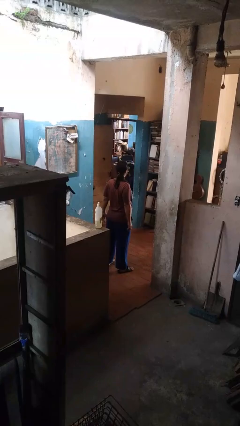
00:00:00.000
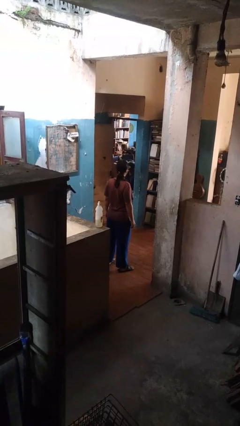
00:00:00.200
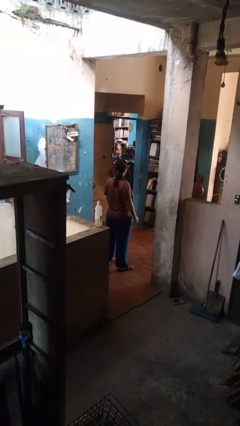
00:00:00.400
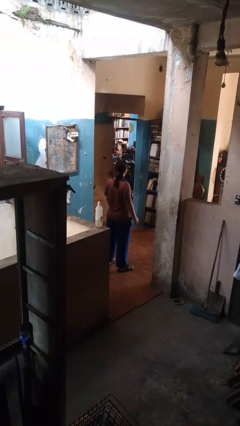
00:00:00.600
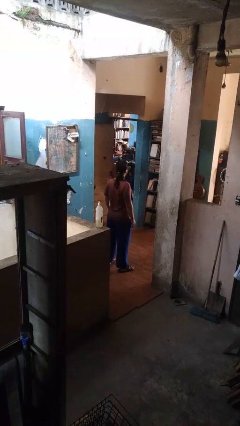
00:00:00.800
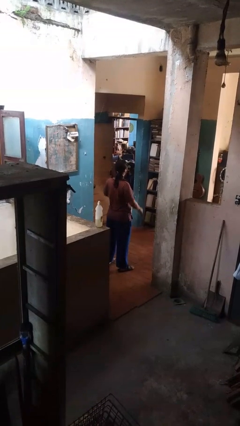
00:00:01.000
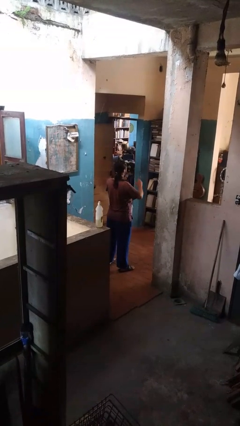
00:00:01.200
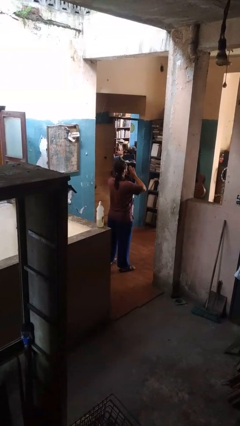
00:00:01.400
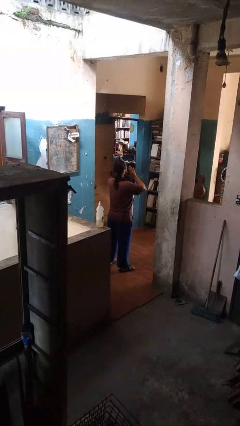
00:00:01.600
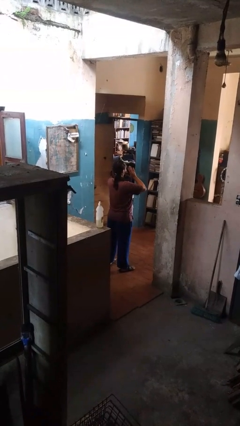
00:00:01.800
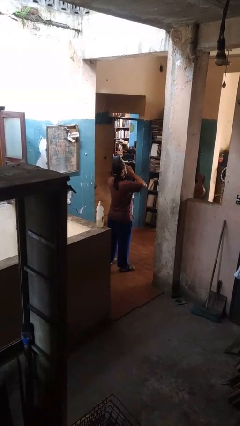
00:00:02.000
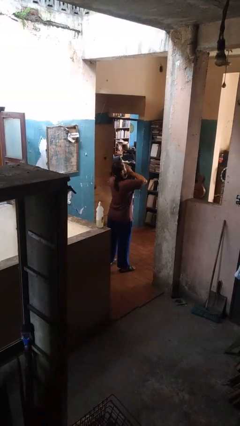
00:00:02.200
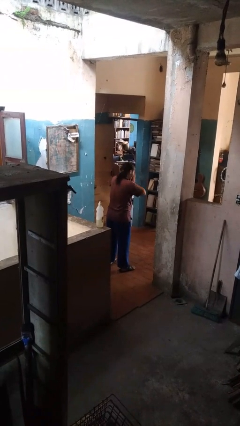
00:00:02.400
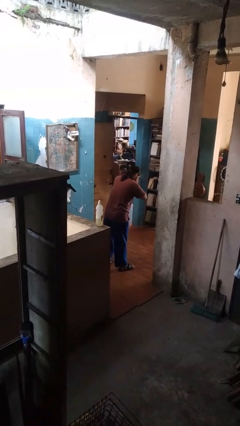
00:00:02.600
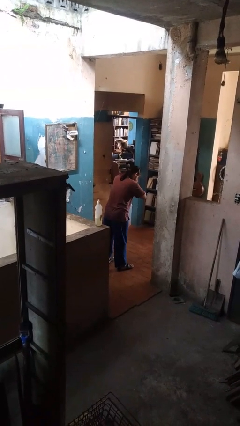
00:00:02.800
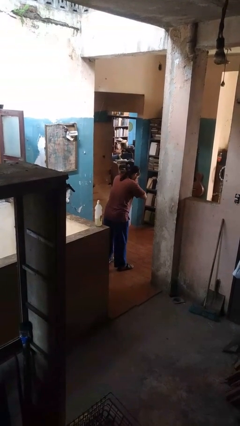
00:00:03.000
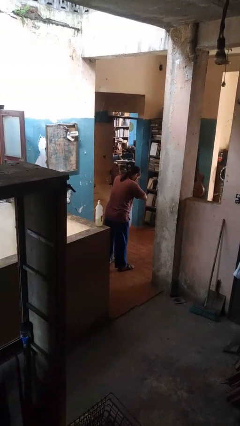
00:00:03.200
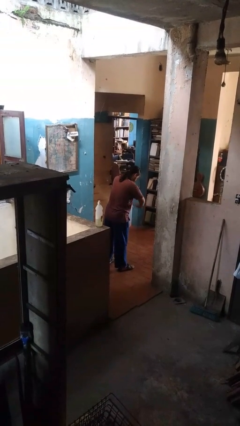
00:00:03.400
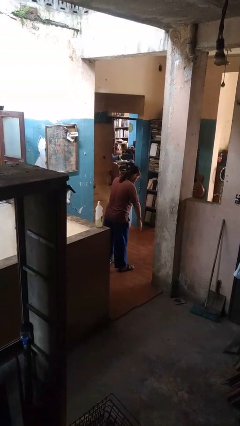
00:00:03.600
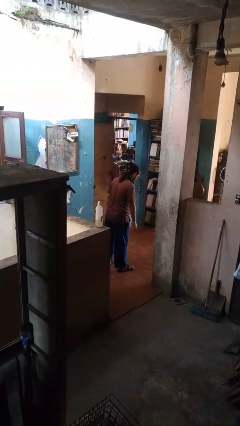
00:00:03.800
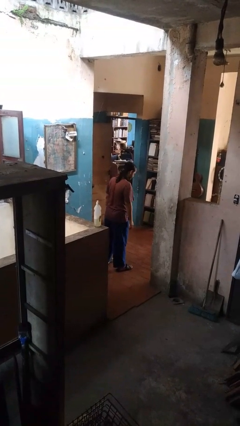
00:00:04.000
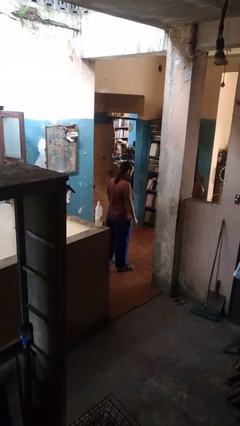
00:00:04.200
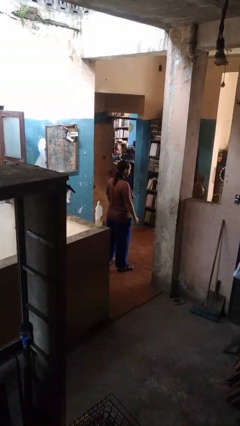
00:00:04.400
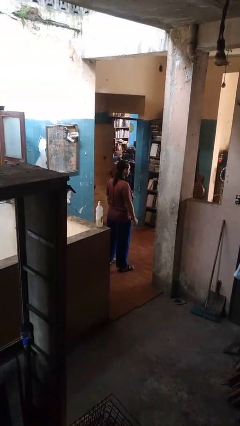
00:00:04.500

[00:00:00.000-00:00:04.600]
person sneezes into hand

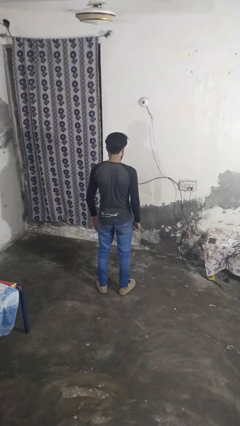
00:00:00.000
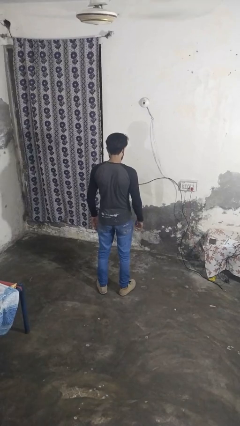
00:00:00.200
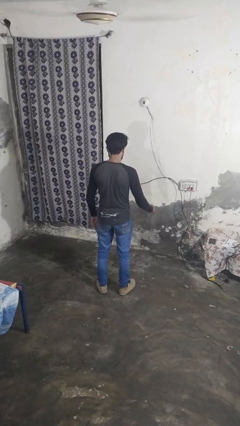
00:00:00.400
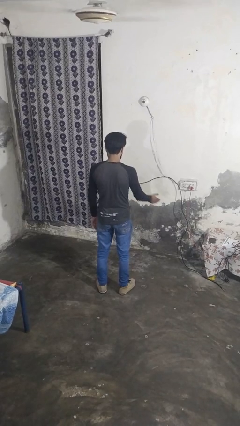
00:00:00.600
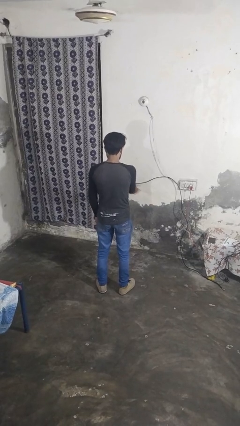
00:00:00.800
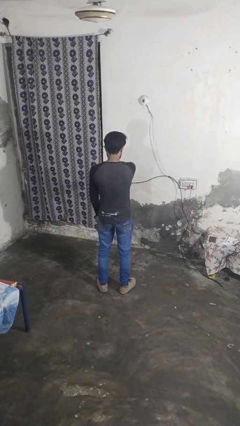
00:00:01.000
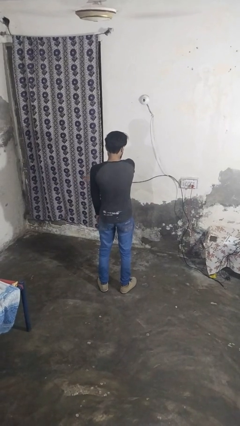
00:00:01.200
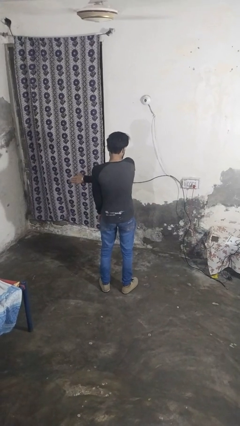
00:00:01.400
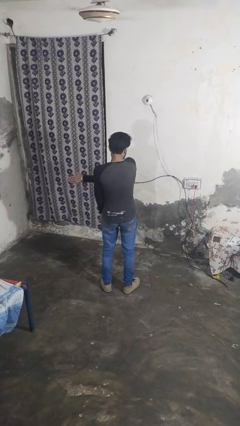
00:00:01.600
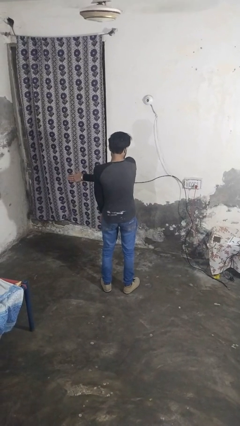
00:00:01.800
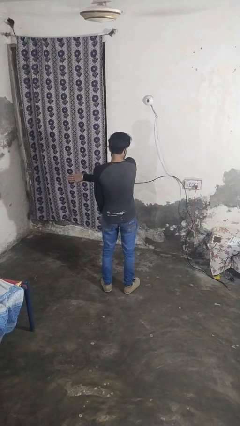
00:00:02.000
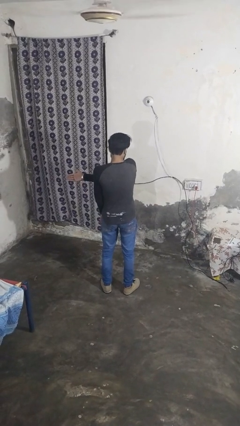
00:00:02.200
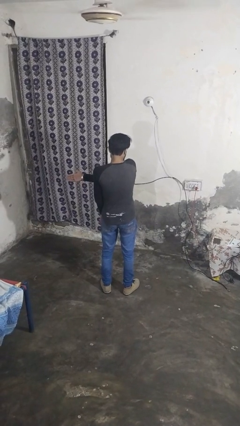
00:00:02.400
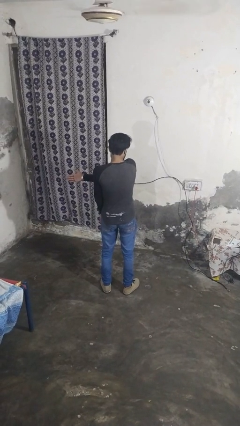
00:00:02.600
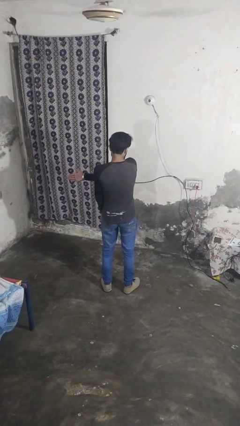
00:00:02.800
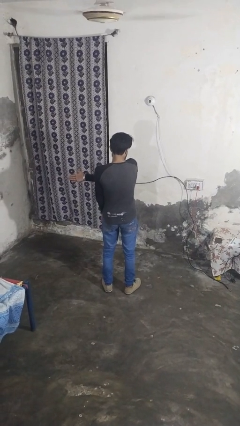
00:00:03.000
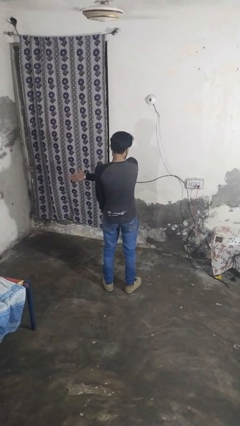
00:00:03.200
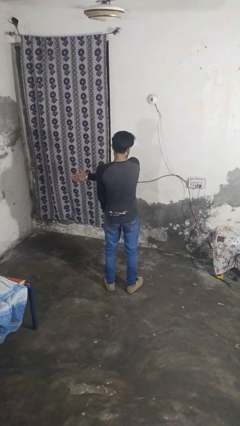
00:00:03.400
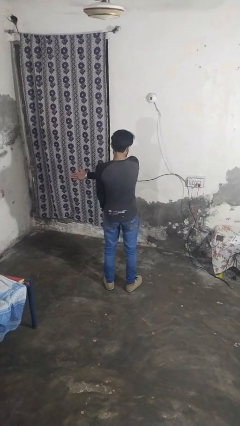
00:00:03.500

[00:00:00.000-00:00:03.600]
person gestures swipe left

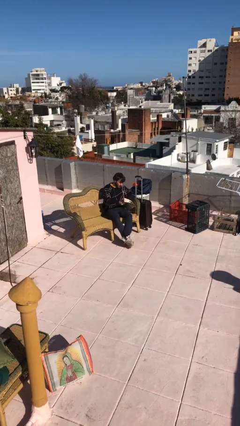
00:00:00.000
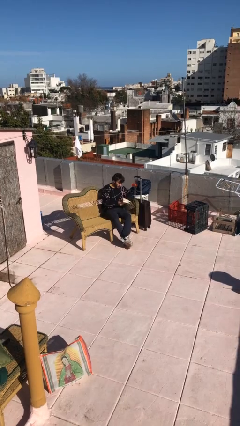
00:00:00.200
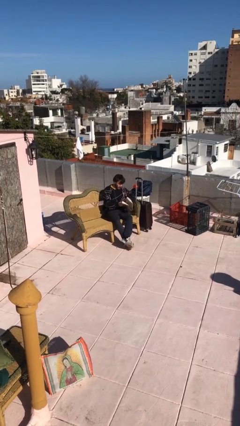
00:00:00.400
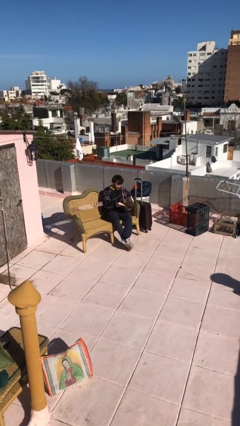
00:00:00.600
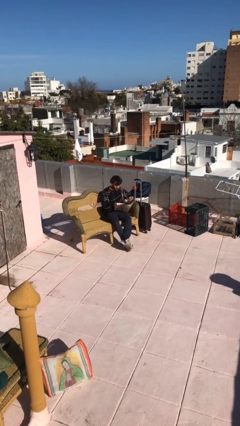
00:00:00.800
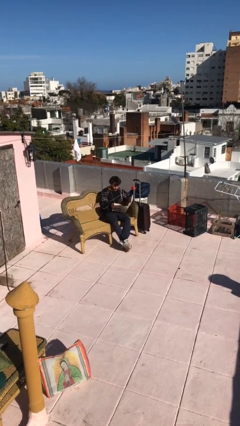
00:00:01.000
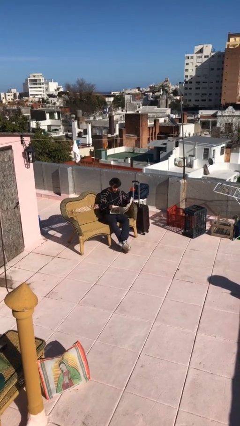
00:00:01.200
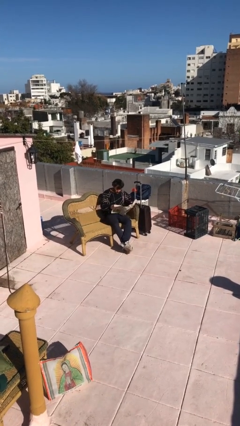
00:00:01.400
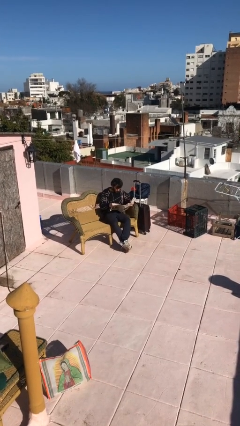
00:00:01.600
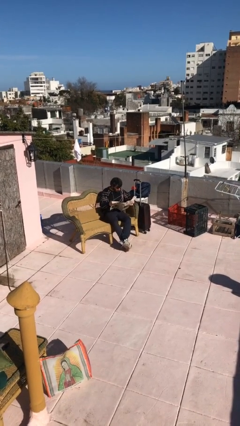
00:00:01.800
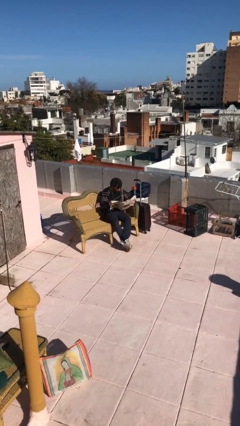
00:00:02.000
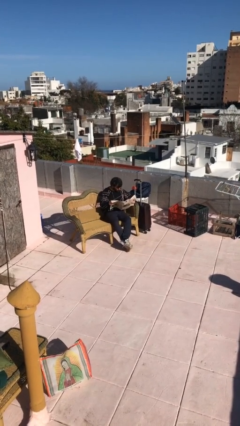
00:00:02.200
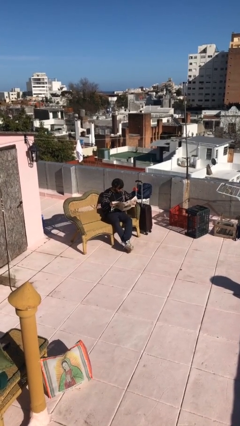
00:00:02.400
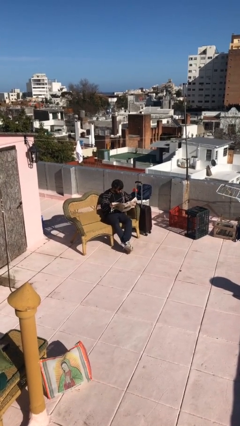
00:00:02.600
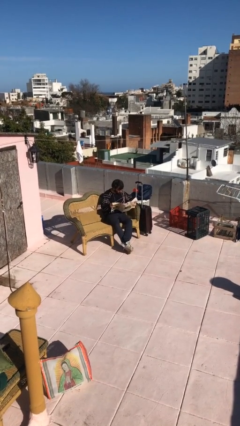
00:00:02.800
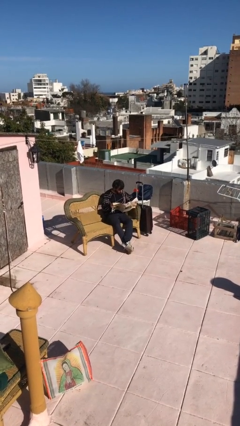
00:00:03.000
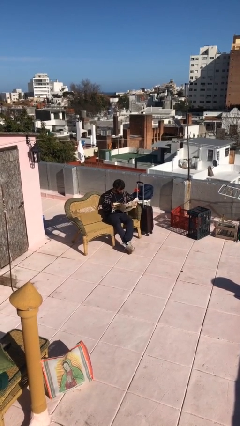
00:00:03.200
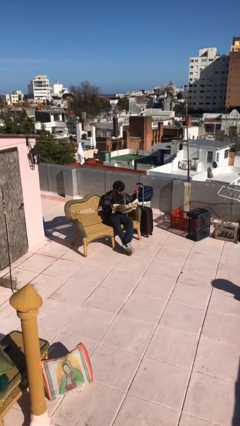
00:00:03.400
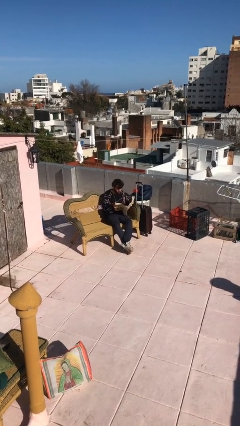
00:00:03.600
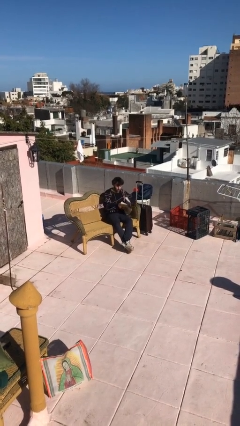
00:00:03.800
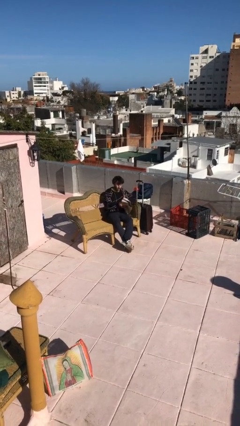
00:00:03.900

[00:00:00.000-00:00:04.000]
person reads newspaper

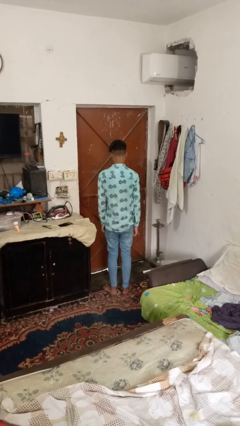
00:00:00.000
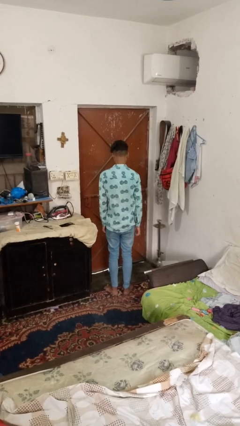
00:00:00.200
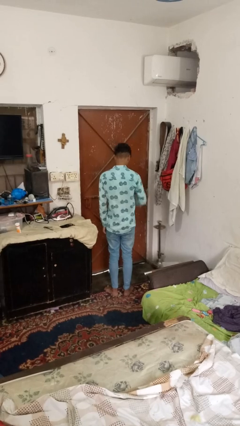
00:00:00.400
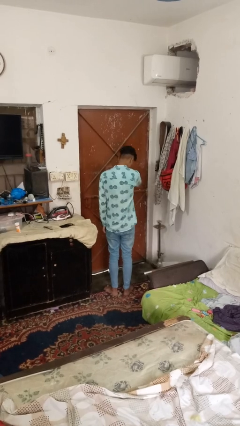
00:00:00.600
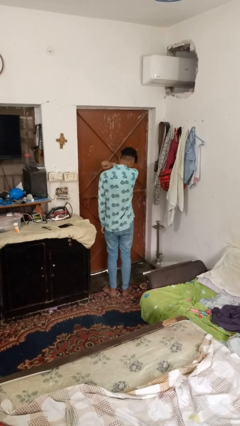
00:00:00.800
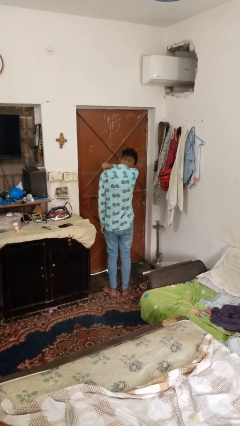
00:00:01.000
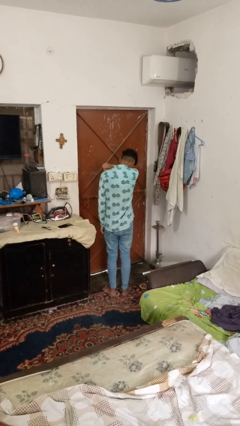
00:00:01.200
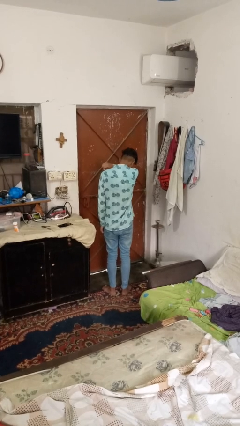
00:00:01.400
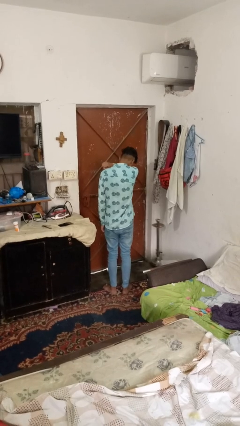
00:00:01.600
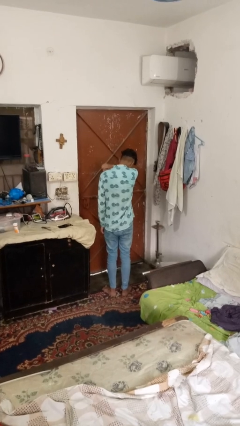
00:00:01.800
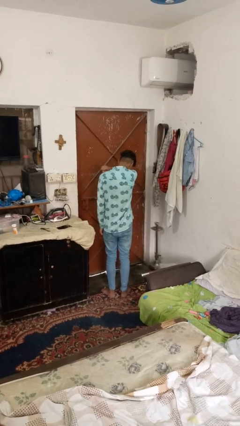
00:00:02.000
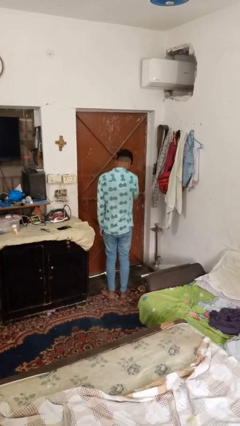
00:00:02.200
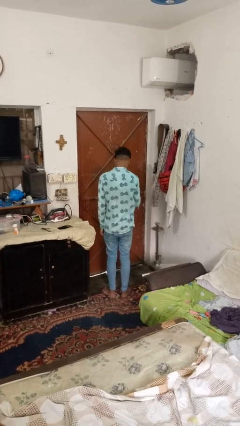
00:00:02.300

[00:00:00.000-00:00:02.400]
person sneezes into arm

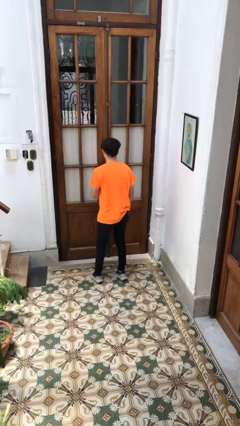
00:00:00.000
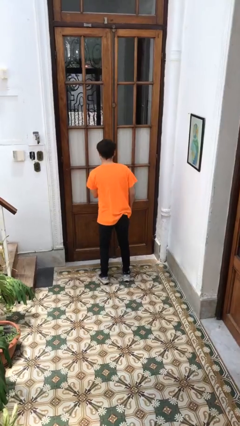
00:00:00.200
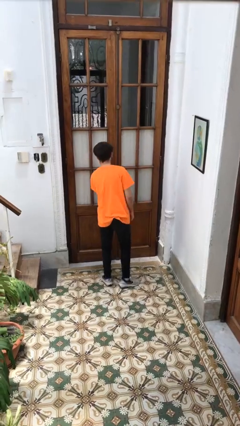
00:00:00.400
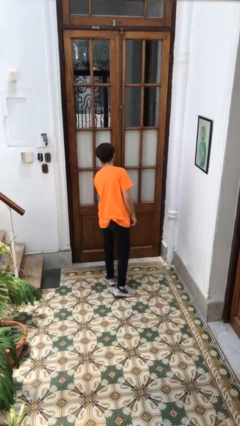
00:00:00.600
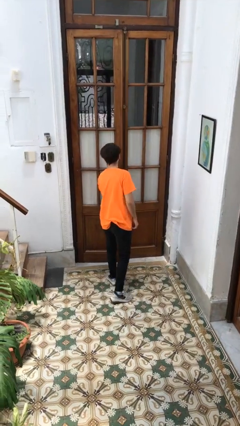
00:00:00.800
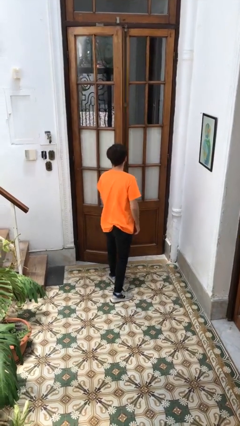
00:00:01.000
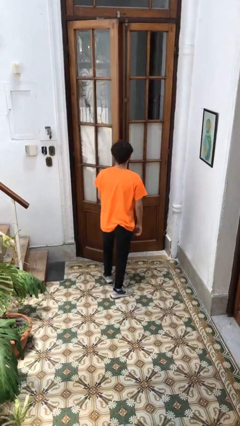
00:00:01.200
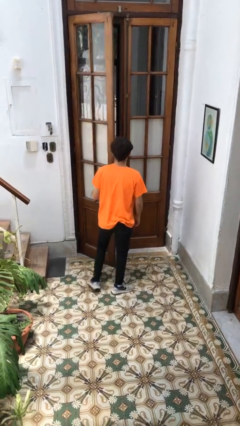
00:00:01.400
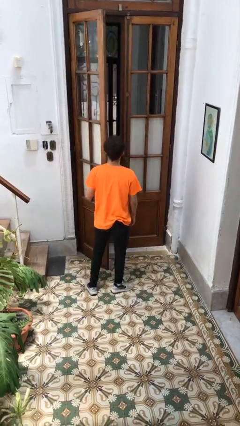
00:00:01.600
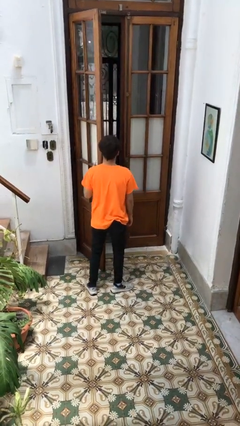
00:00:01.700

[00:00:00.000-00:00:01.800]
person opens facility door

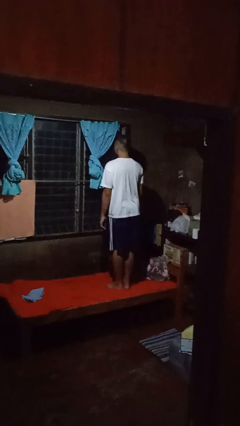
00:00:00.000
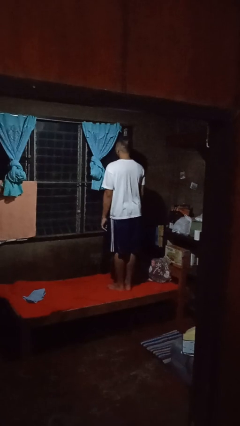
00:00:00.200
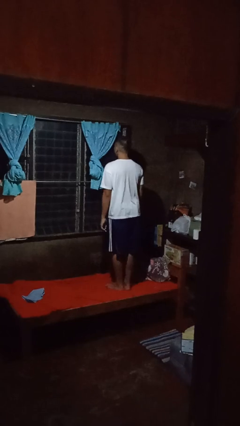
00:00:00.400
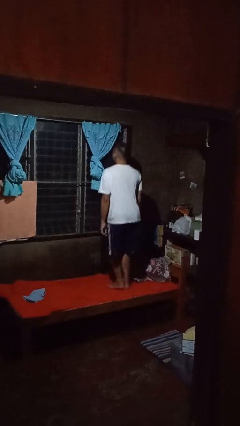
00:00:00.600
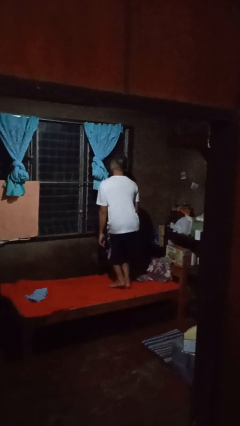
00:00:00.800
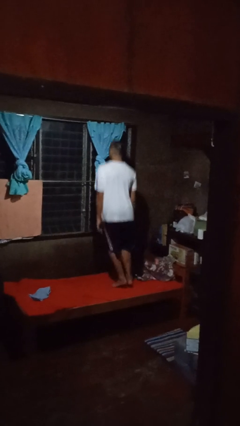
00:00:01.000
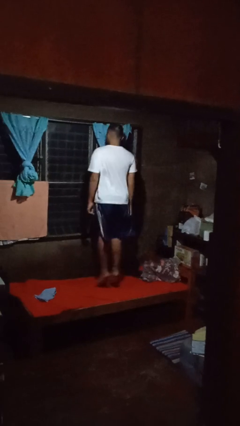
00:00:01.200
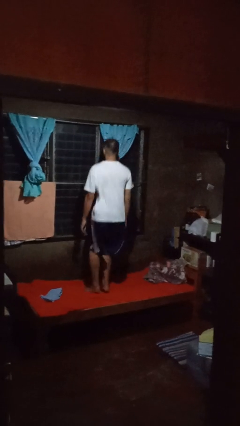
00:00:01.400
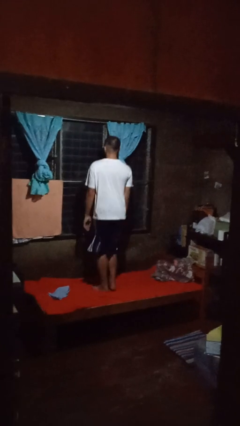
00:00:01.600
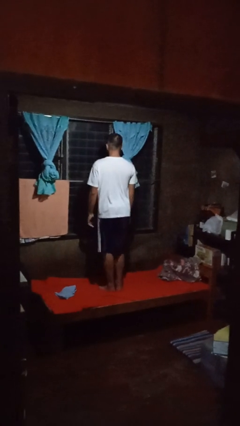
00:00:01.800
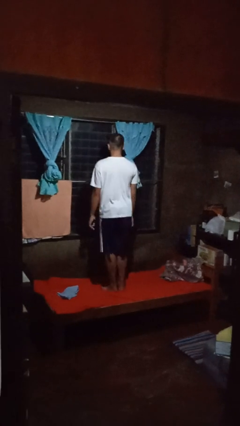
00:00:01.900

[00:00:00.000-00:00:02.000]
person jumps on bed
